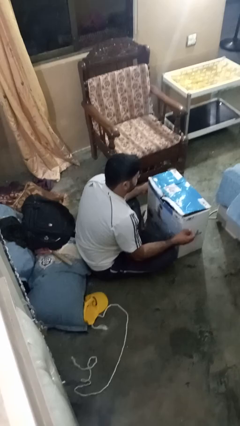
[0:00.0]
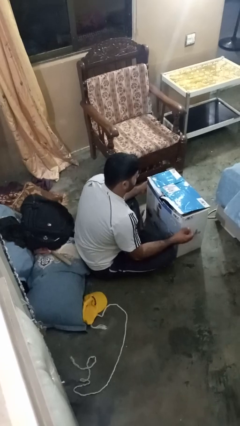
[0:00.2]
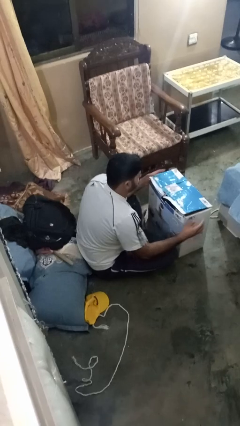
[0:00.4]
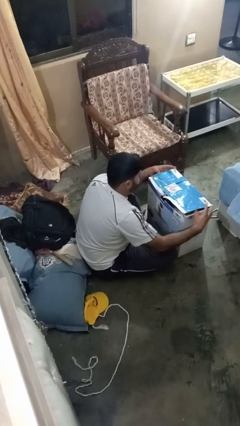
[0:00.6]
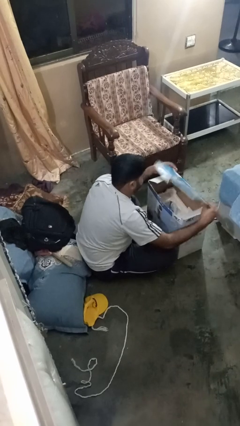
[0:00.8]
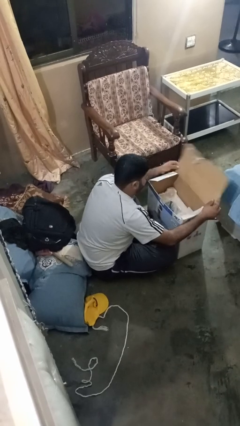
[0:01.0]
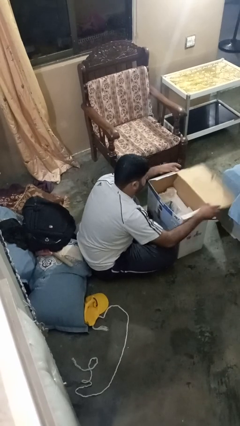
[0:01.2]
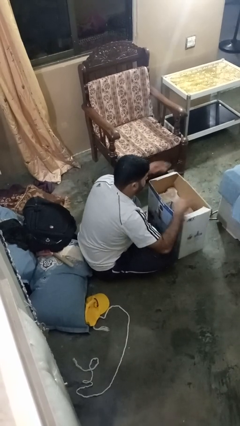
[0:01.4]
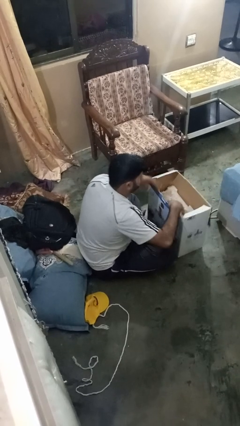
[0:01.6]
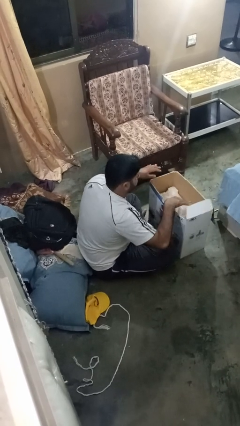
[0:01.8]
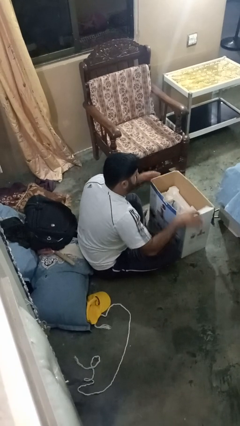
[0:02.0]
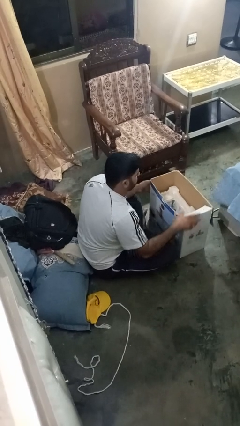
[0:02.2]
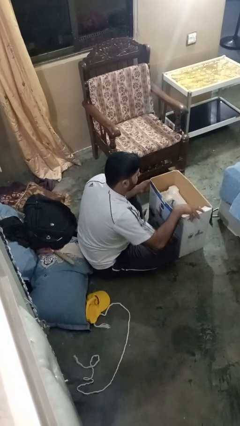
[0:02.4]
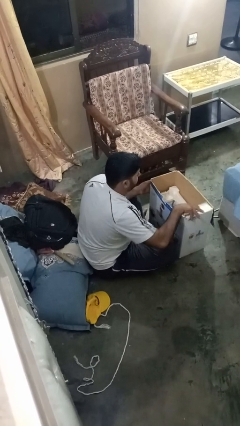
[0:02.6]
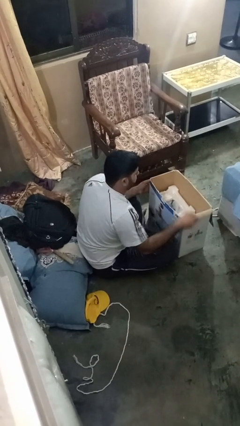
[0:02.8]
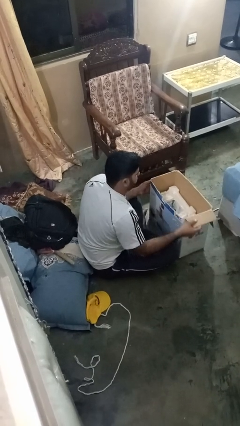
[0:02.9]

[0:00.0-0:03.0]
person opens box

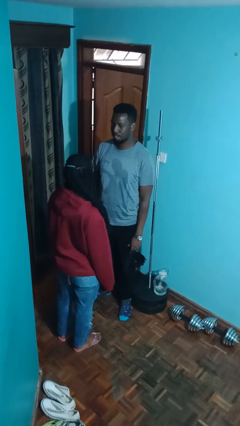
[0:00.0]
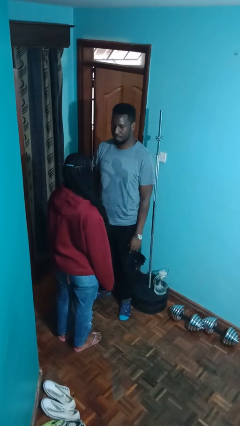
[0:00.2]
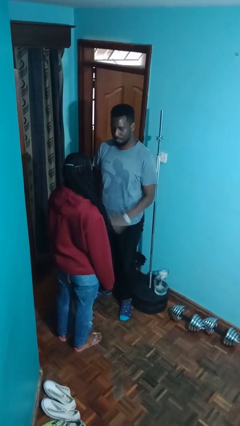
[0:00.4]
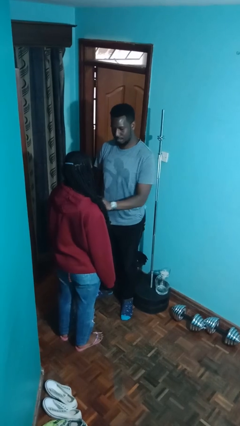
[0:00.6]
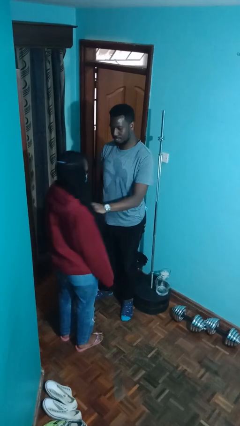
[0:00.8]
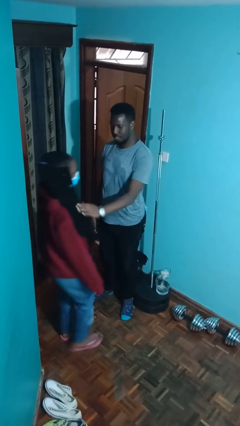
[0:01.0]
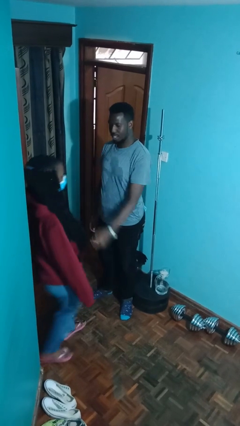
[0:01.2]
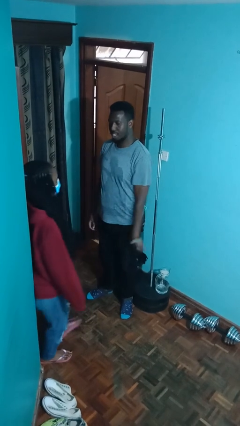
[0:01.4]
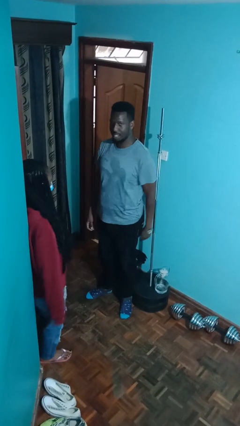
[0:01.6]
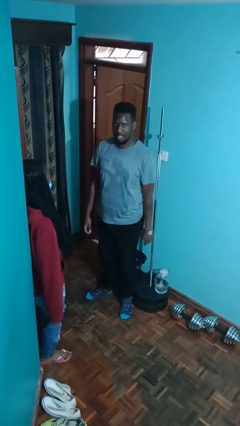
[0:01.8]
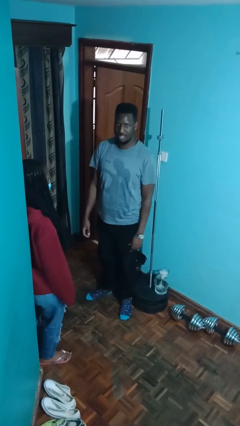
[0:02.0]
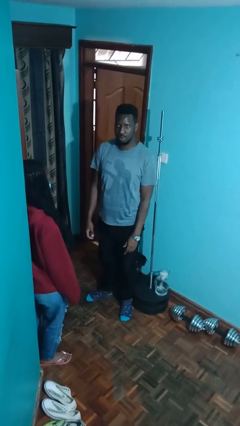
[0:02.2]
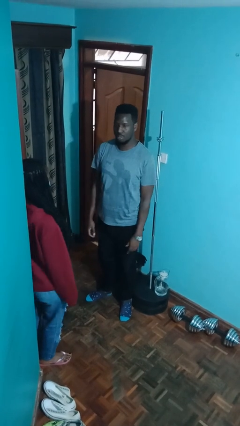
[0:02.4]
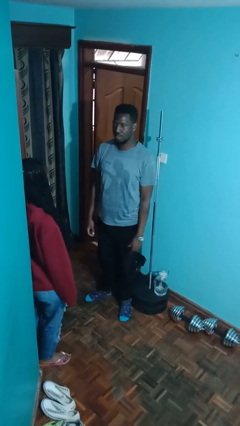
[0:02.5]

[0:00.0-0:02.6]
person shoves person

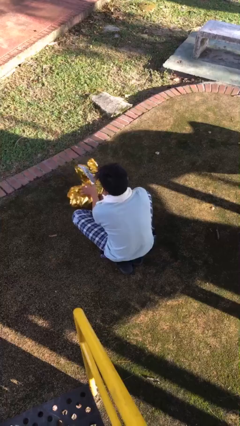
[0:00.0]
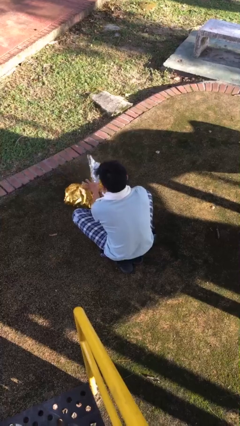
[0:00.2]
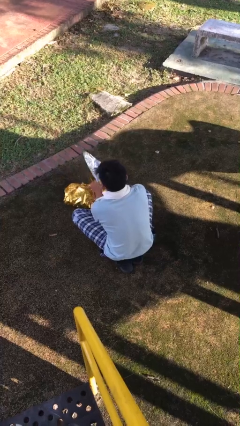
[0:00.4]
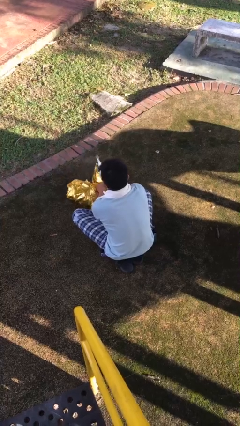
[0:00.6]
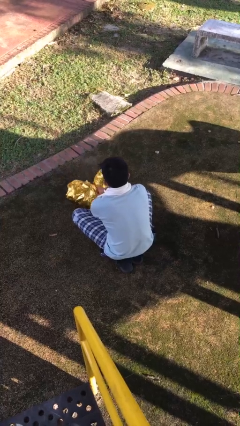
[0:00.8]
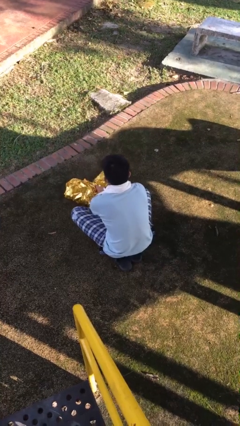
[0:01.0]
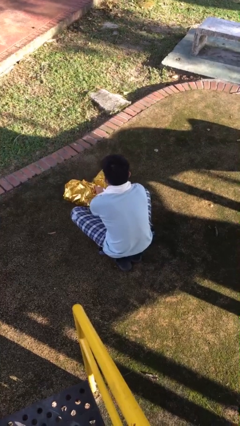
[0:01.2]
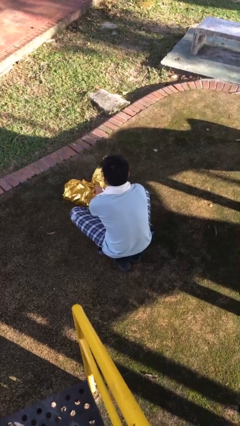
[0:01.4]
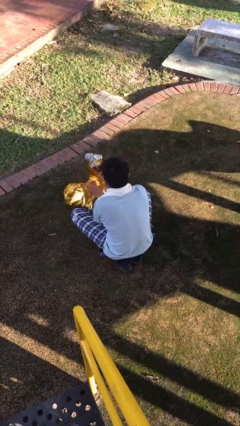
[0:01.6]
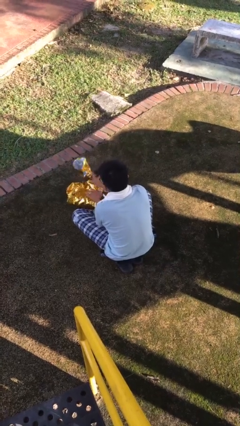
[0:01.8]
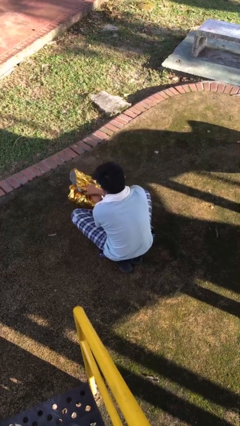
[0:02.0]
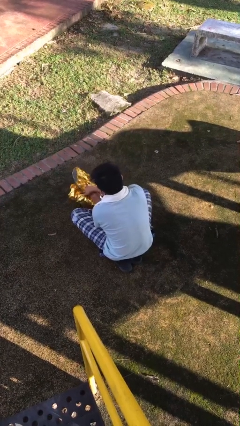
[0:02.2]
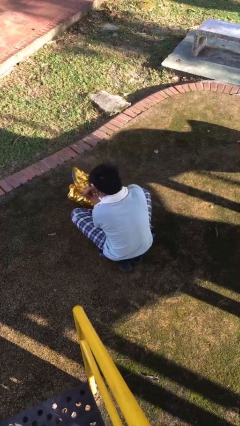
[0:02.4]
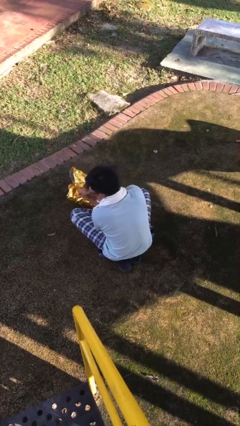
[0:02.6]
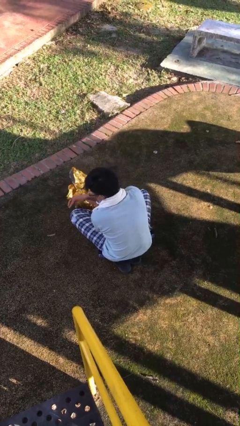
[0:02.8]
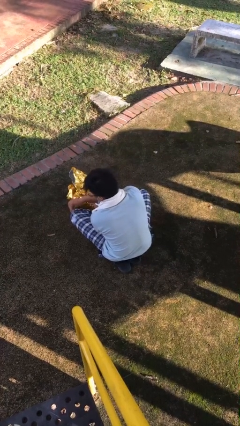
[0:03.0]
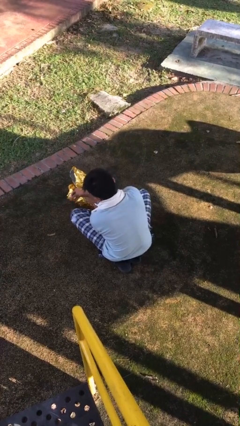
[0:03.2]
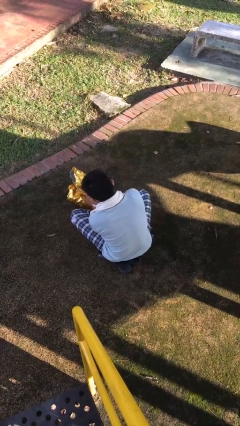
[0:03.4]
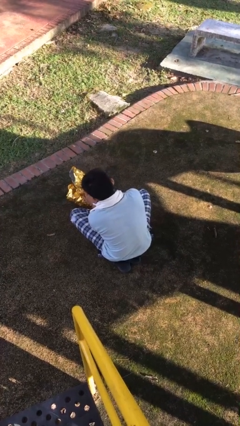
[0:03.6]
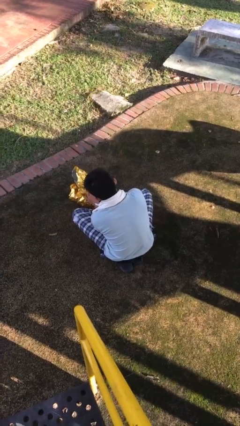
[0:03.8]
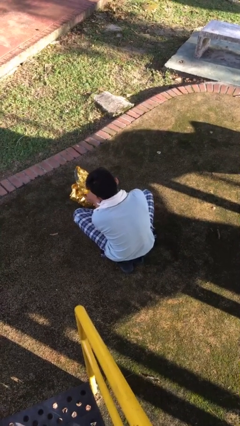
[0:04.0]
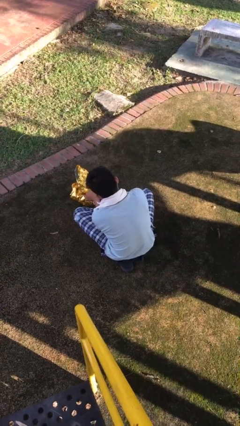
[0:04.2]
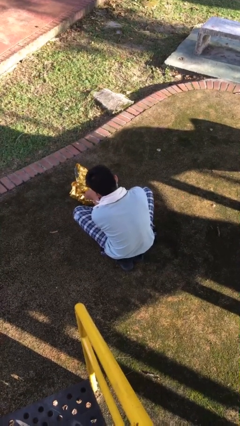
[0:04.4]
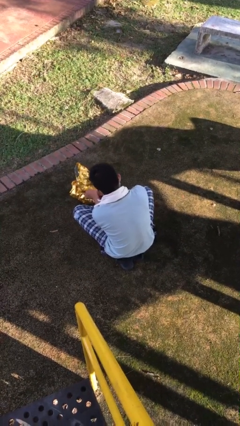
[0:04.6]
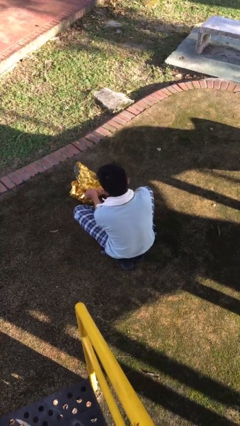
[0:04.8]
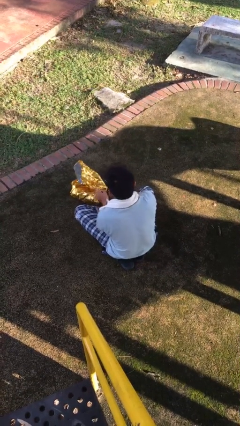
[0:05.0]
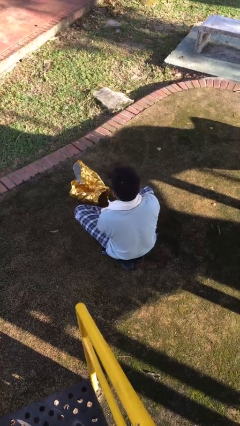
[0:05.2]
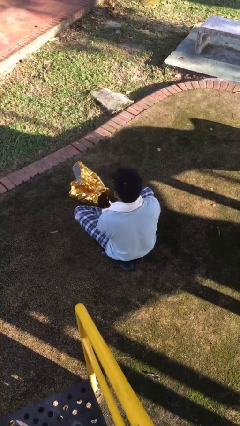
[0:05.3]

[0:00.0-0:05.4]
person wraps box

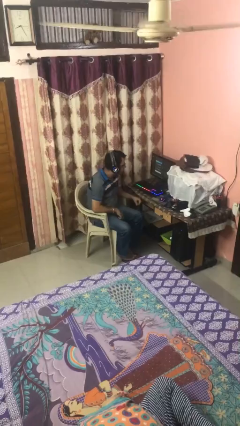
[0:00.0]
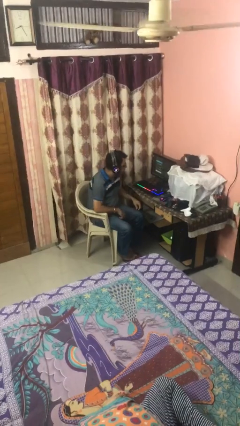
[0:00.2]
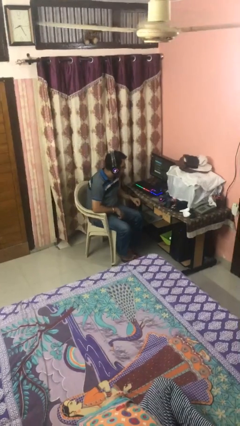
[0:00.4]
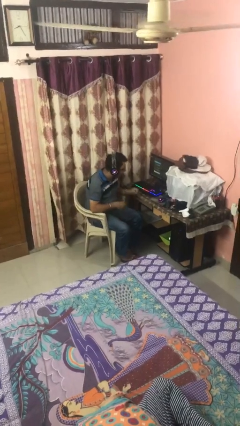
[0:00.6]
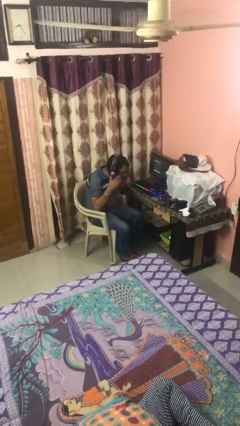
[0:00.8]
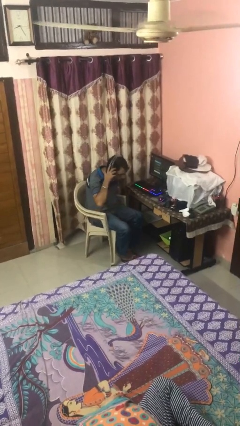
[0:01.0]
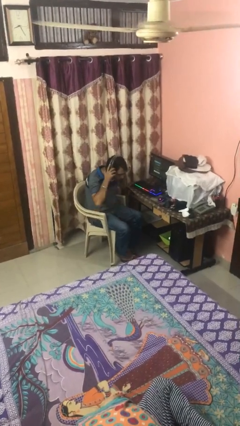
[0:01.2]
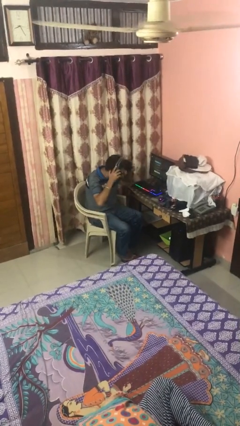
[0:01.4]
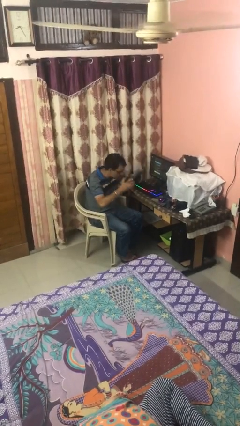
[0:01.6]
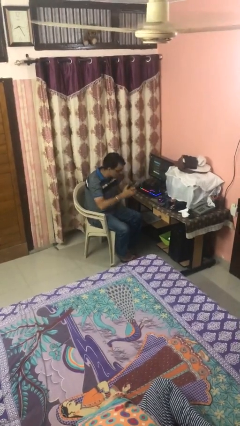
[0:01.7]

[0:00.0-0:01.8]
person takes off headphones

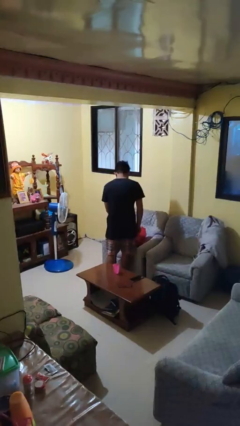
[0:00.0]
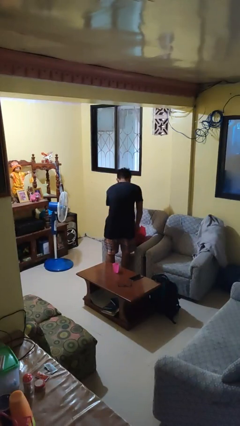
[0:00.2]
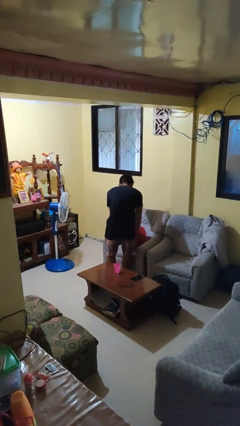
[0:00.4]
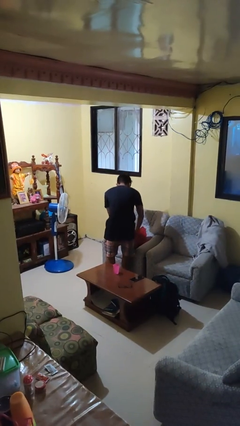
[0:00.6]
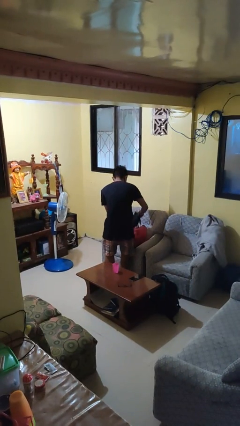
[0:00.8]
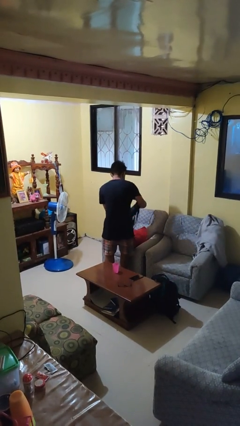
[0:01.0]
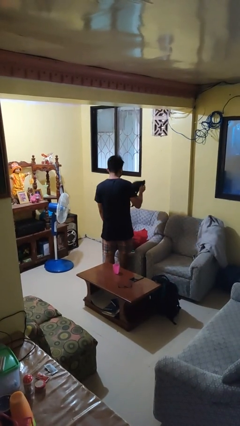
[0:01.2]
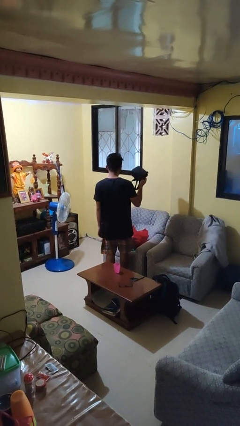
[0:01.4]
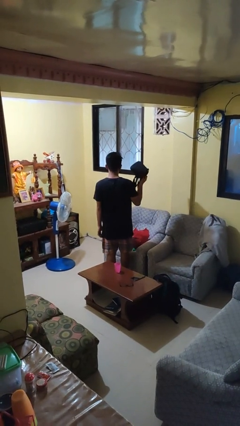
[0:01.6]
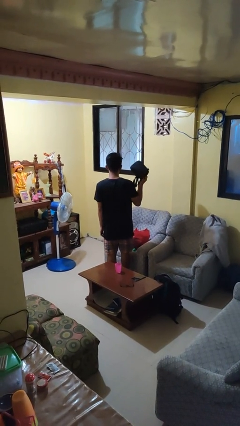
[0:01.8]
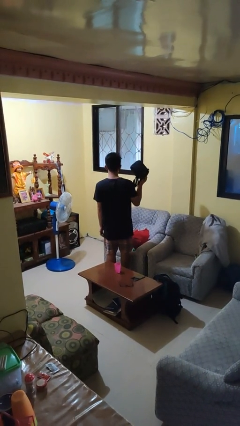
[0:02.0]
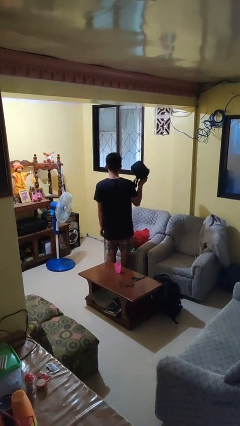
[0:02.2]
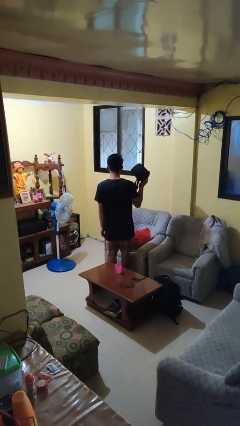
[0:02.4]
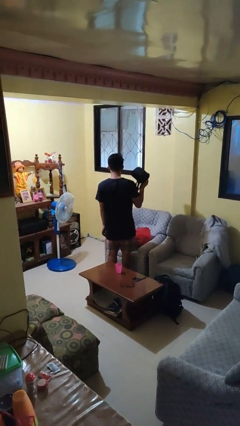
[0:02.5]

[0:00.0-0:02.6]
person takes object from bag

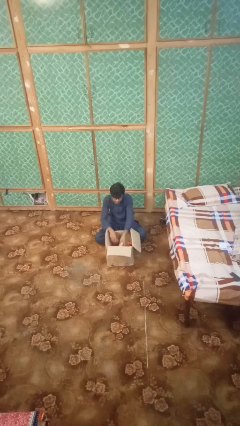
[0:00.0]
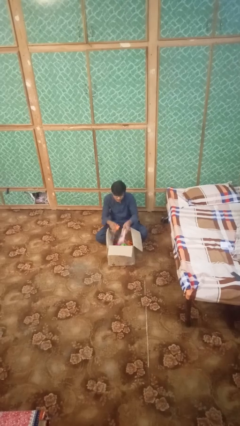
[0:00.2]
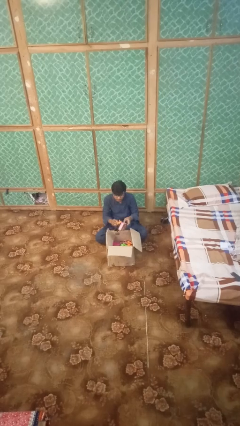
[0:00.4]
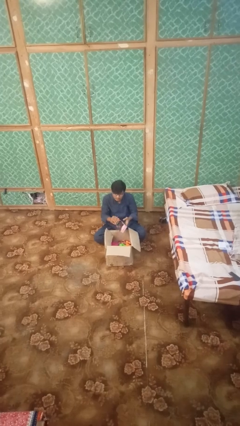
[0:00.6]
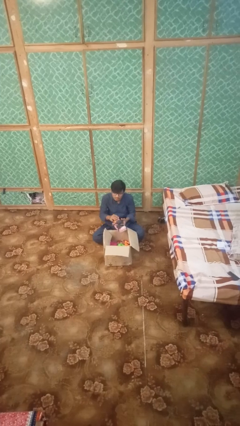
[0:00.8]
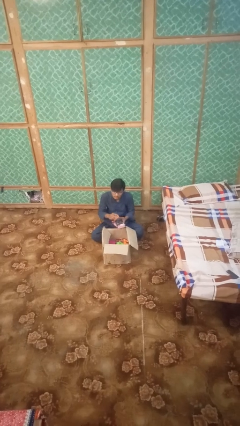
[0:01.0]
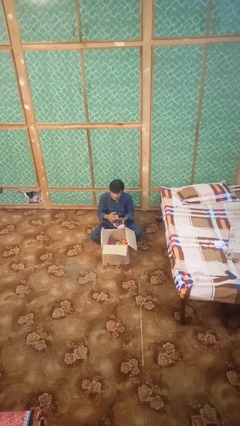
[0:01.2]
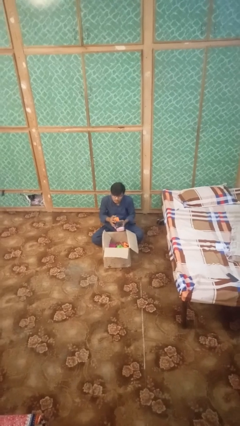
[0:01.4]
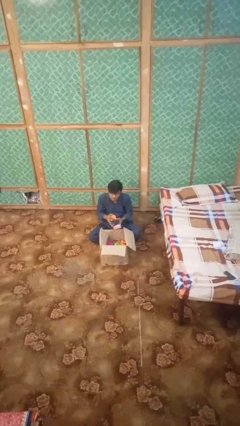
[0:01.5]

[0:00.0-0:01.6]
person takes object from box
